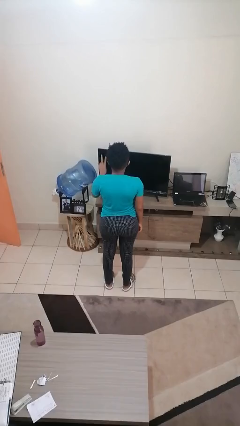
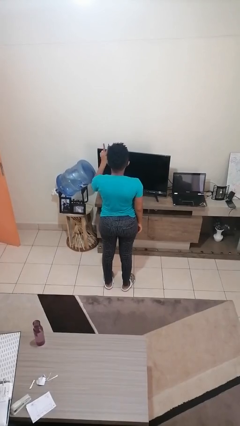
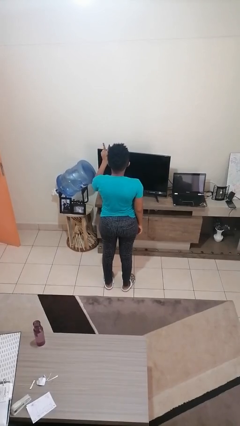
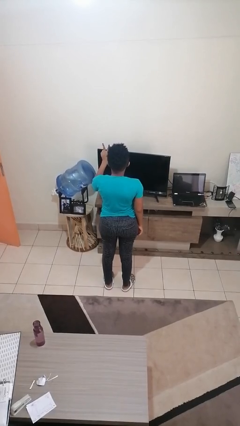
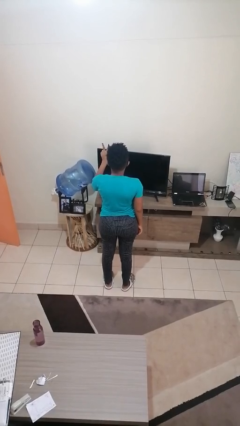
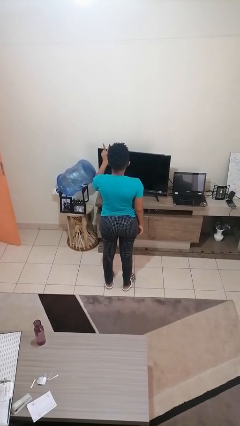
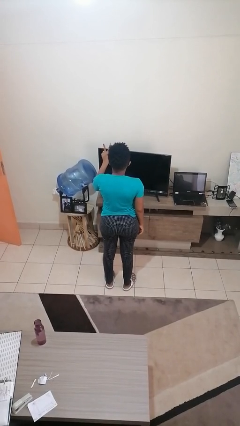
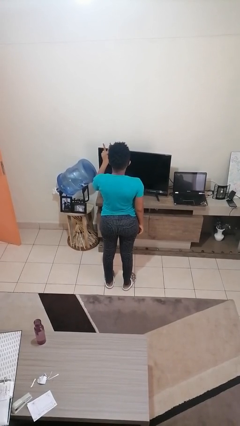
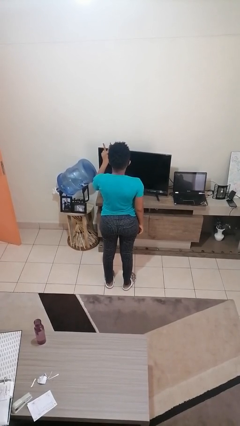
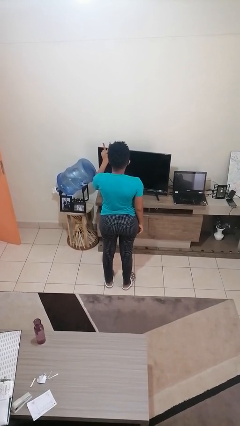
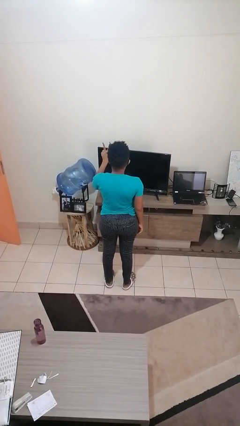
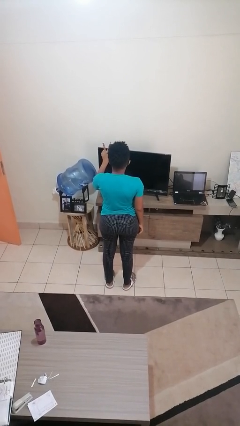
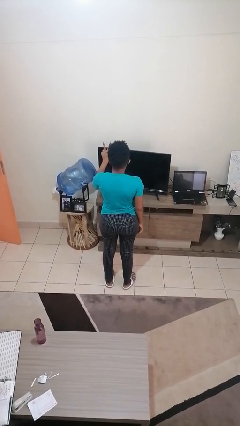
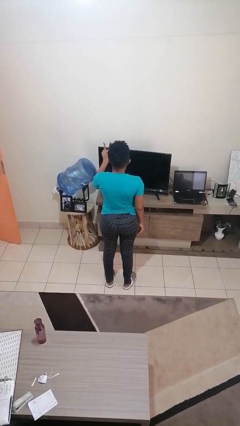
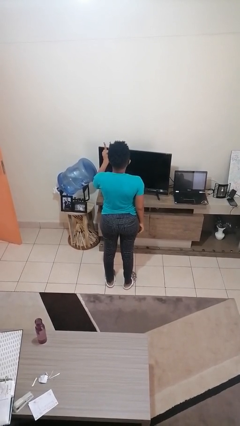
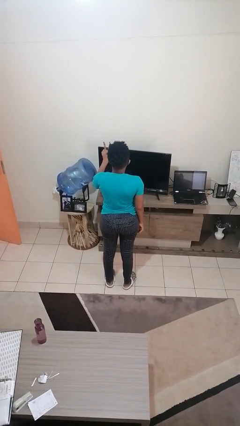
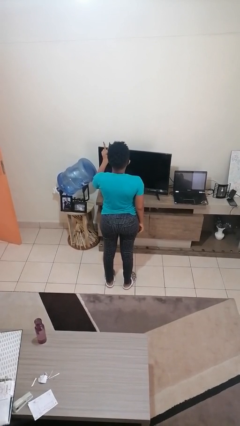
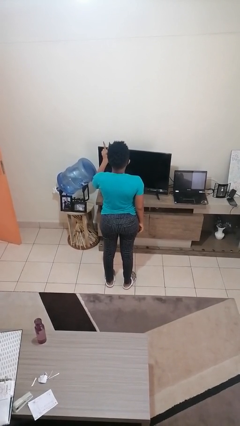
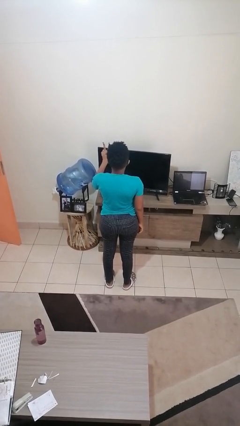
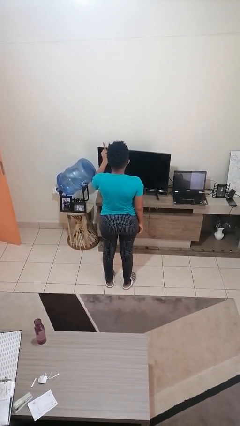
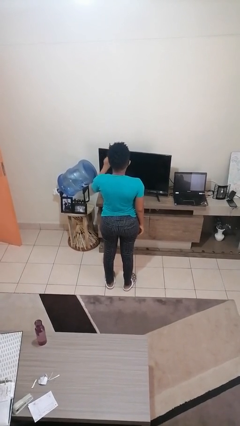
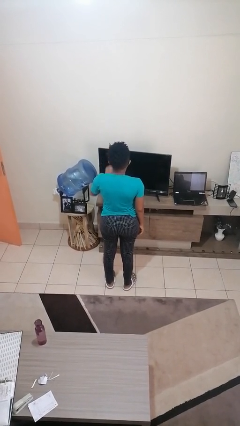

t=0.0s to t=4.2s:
person gestures peace

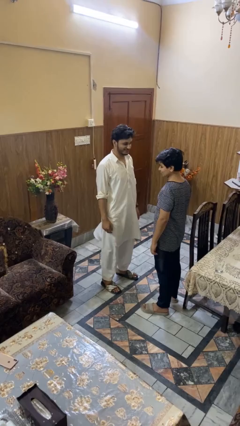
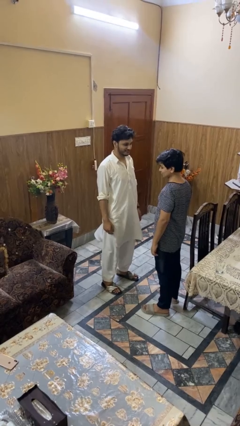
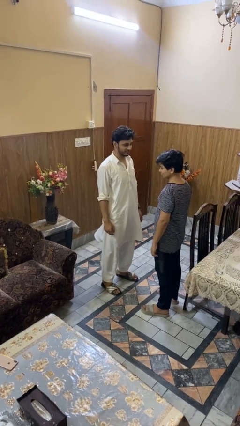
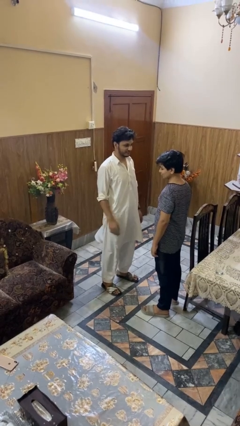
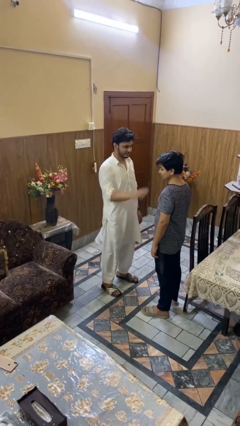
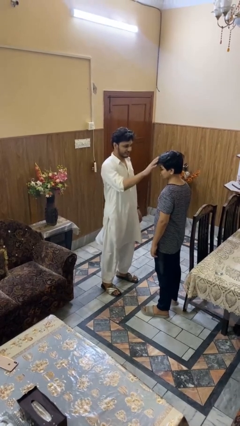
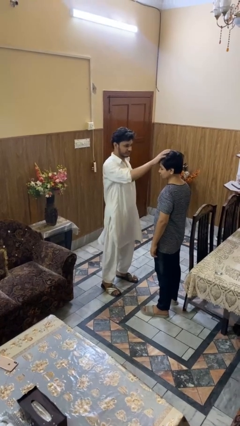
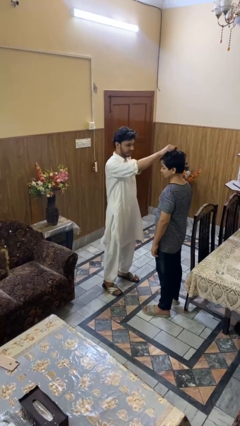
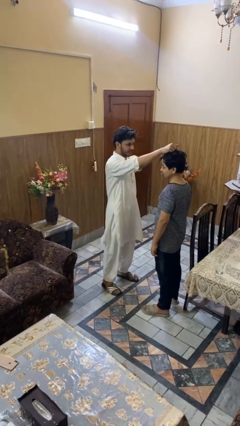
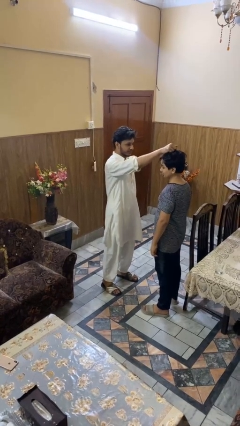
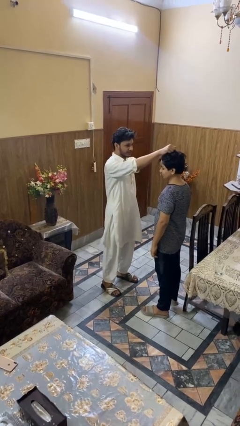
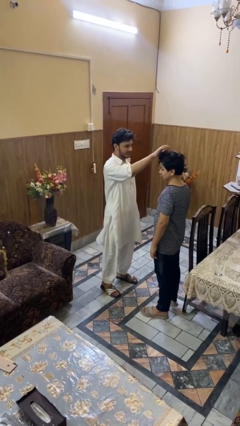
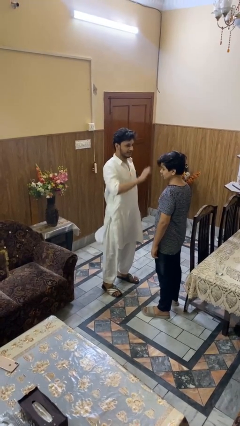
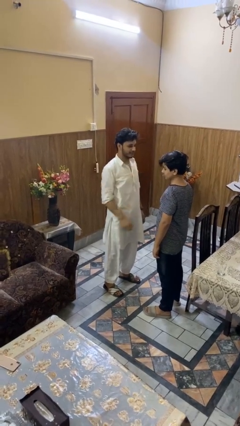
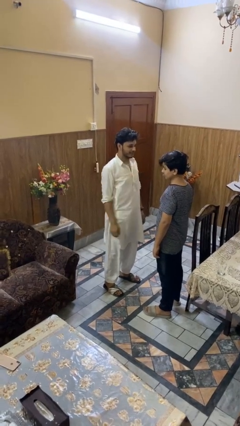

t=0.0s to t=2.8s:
person grabs person by hair

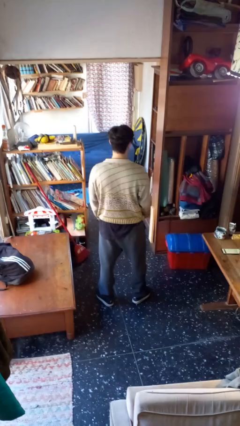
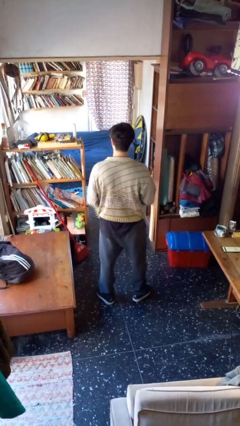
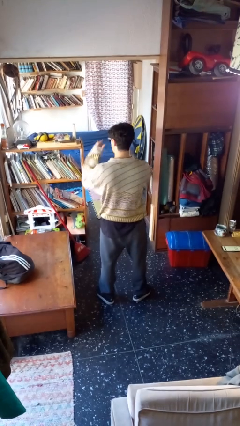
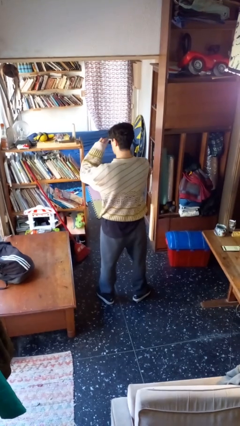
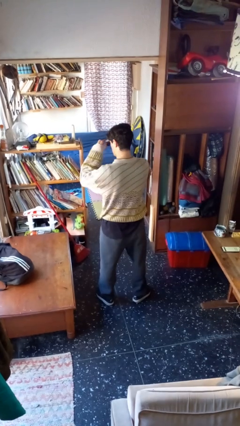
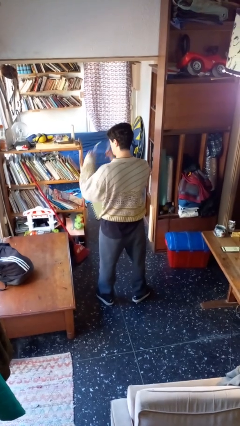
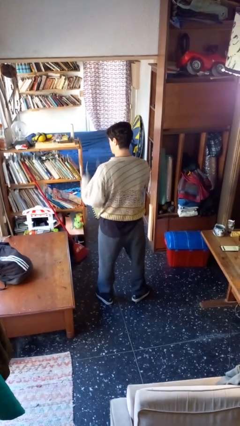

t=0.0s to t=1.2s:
person takes off sunglasses

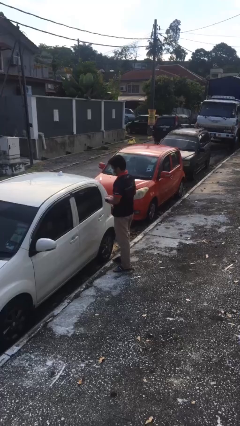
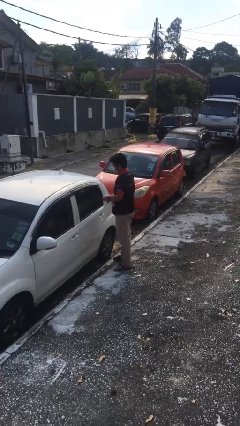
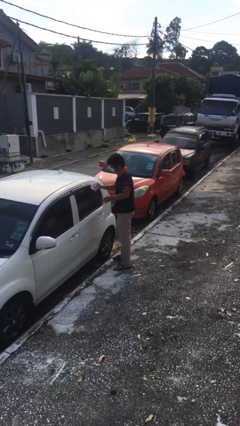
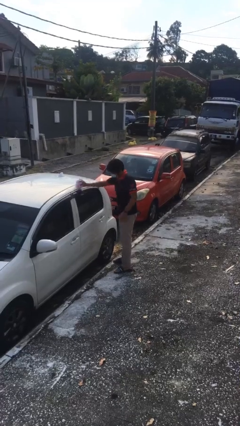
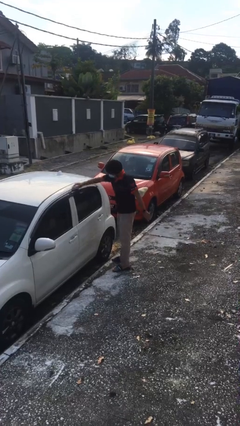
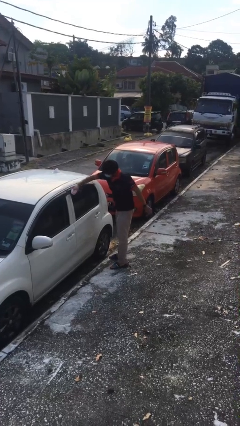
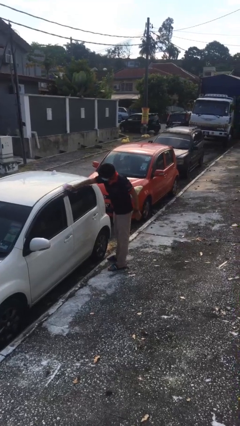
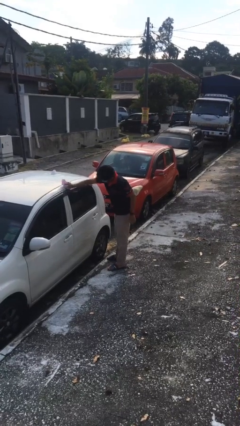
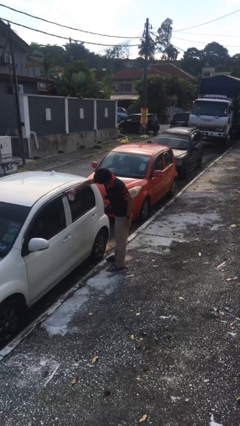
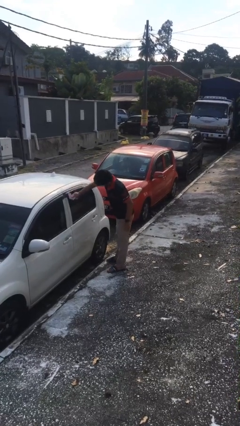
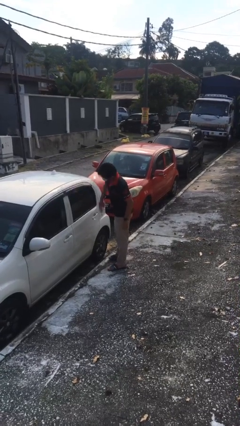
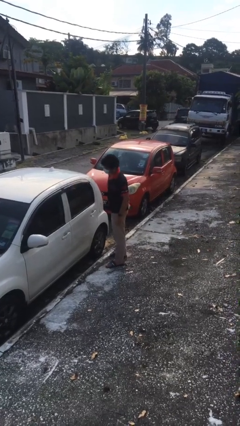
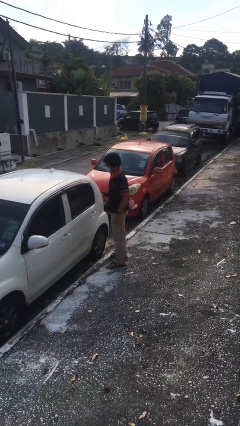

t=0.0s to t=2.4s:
person polishes car with rag

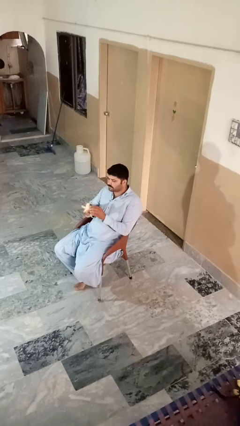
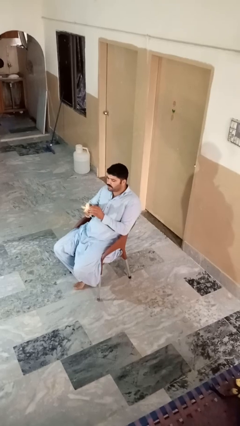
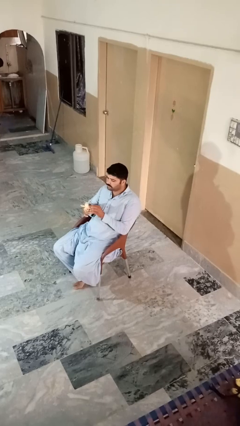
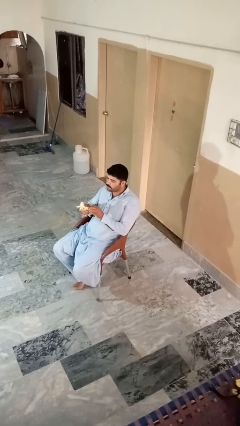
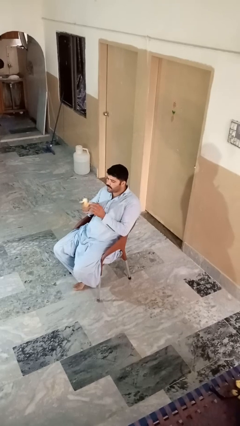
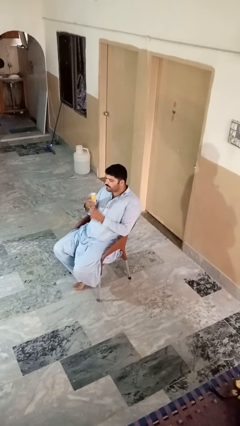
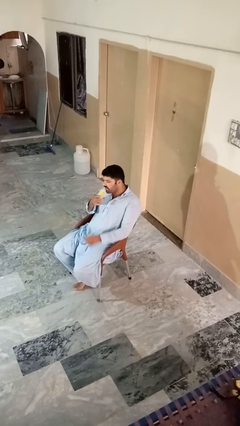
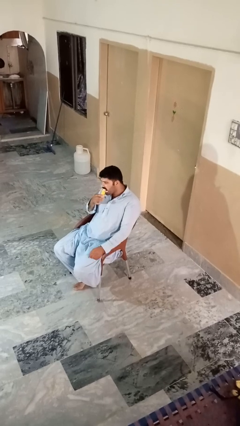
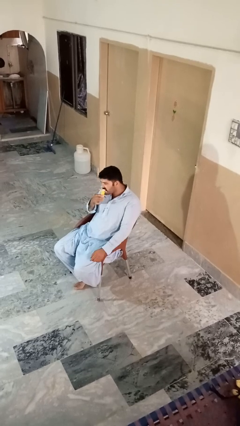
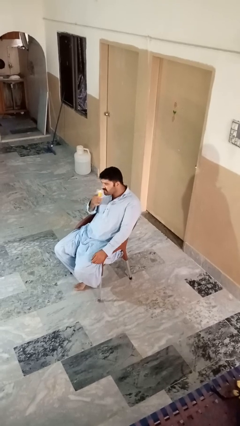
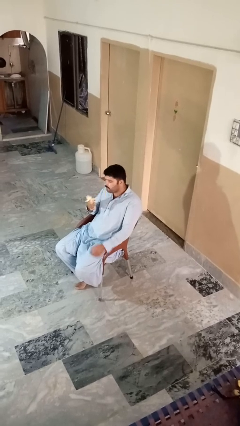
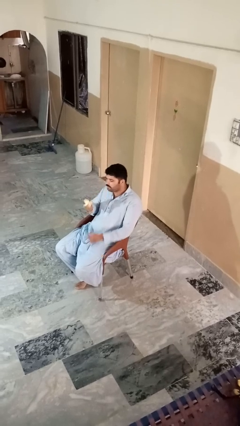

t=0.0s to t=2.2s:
person eats banana

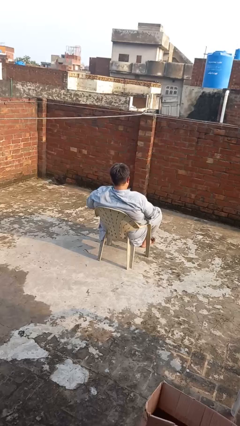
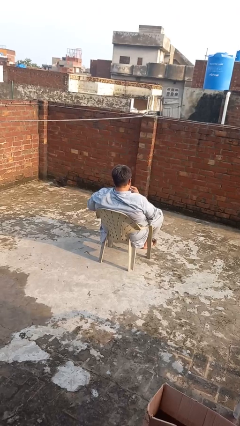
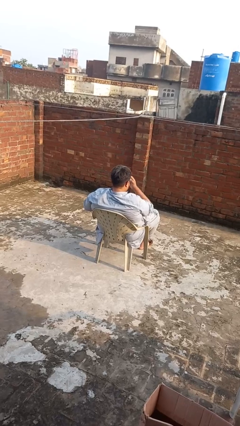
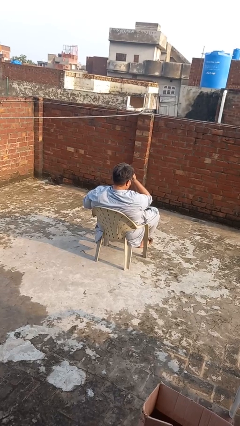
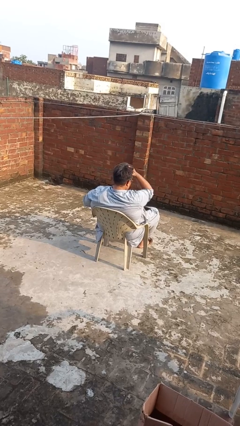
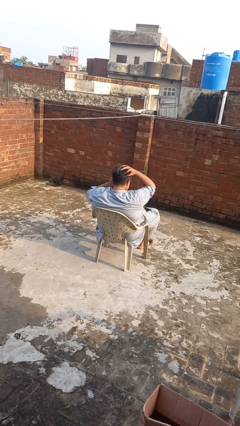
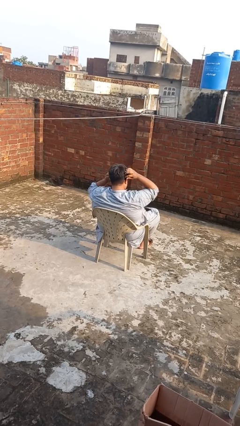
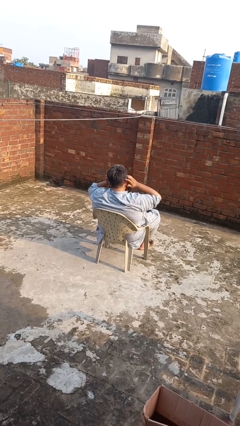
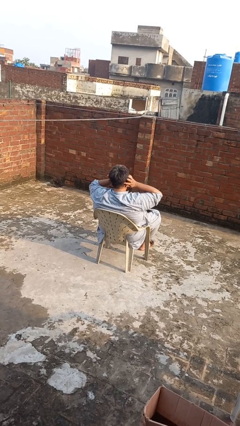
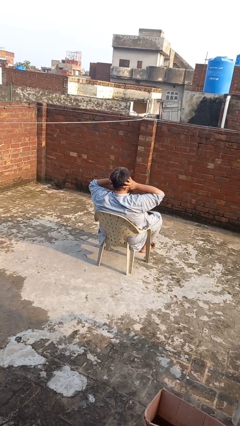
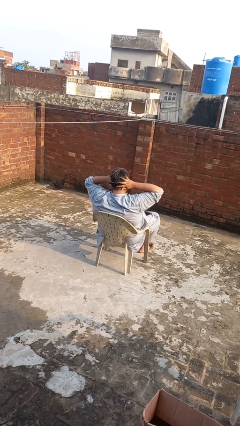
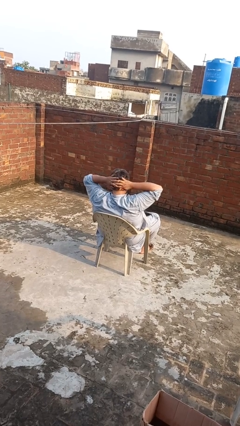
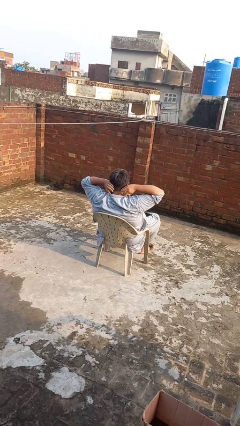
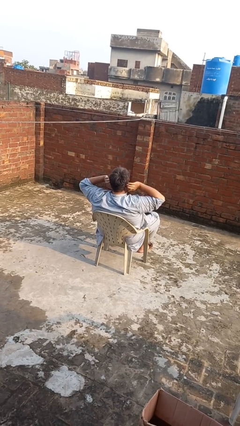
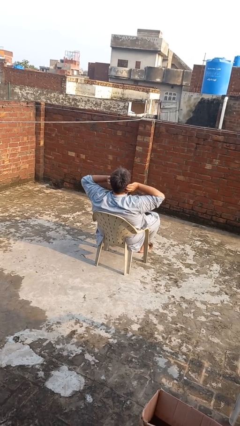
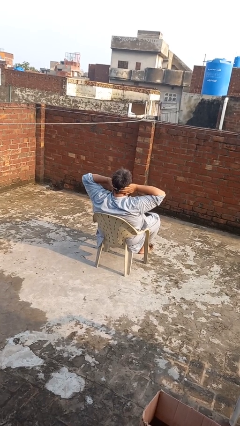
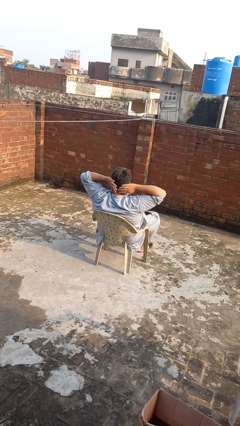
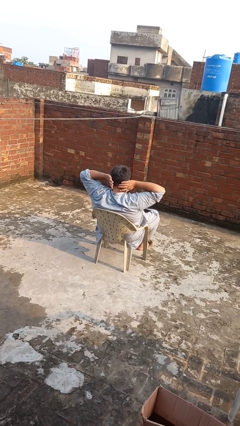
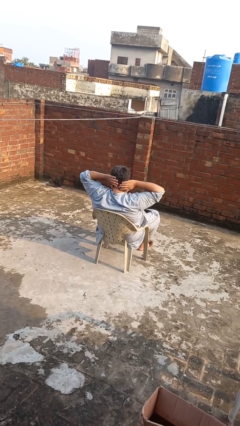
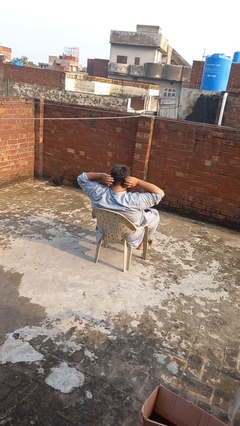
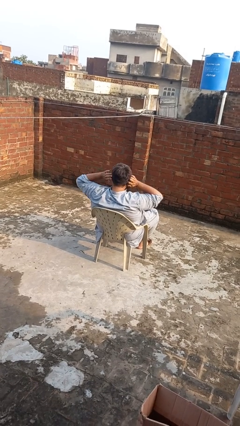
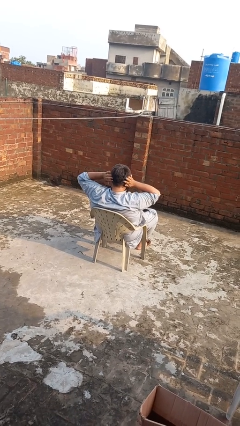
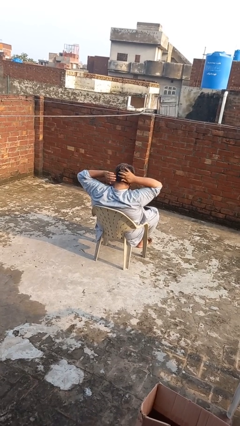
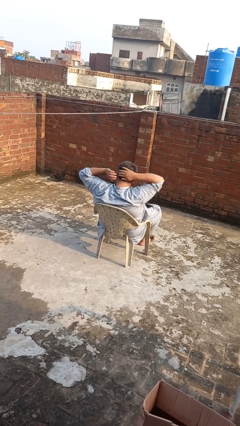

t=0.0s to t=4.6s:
person strokes hair
